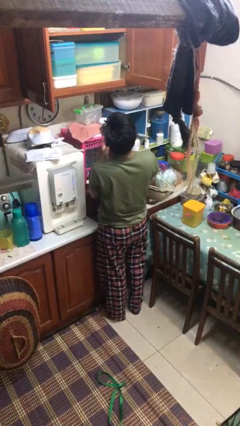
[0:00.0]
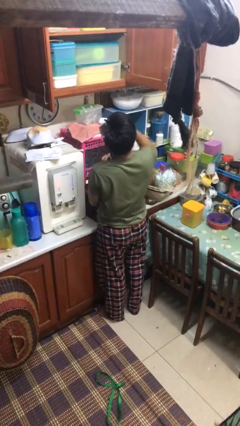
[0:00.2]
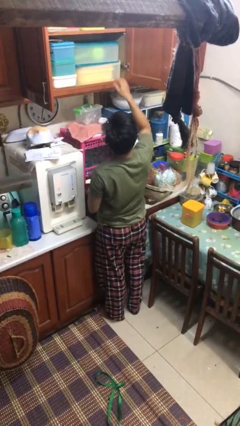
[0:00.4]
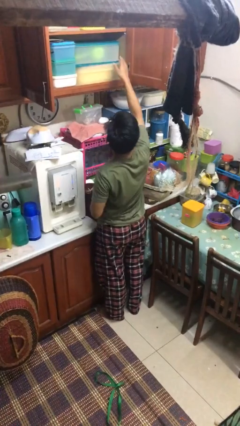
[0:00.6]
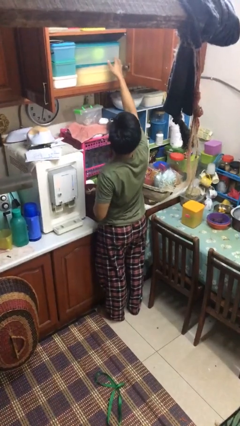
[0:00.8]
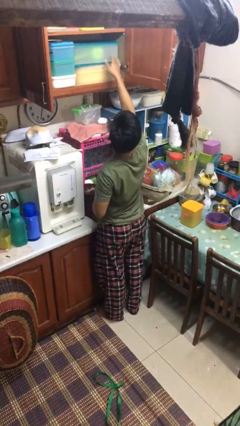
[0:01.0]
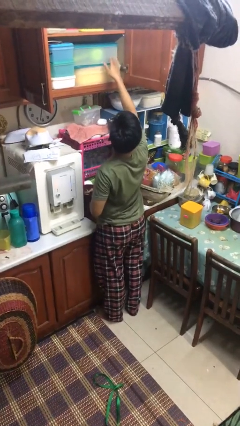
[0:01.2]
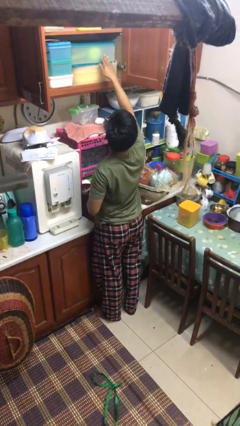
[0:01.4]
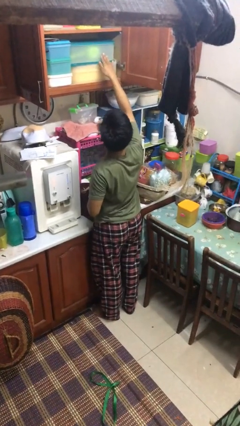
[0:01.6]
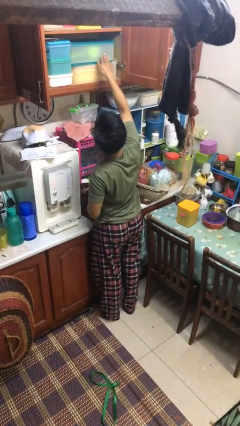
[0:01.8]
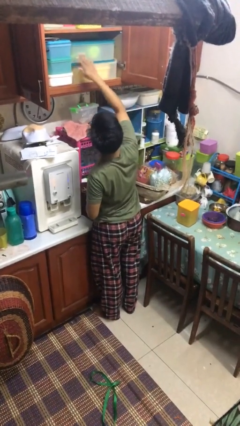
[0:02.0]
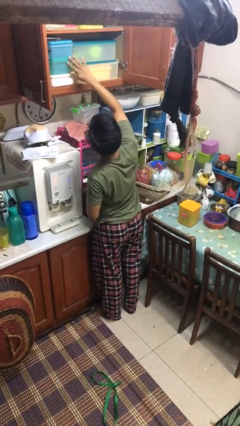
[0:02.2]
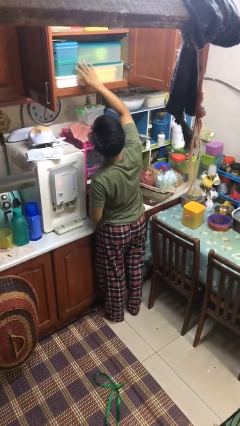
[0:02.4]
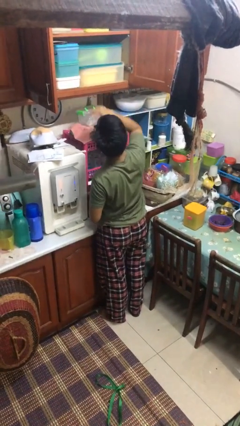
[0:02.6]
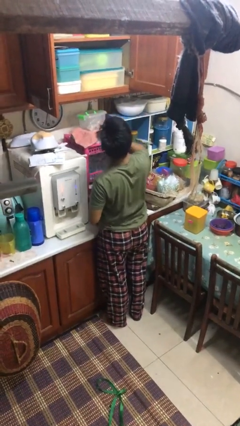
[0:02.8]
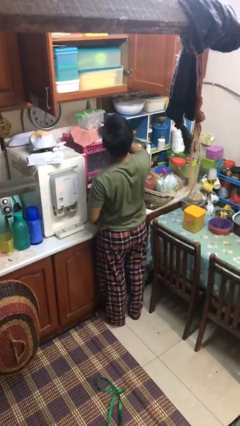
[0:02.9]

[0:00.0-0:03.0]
person searches in kitchen drawer

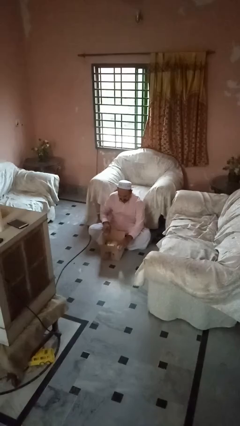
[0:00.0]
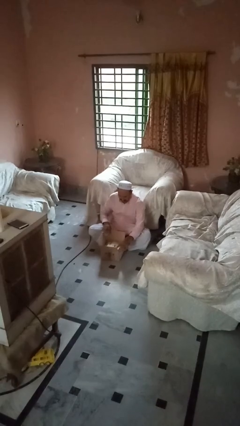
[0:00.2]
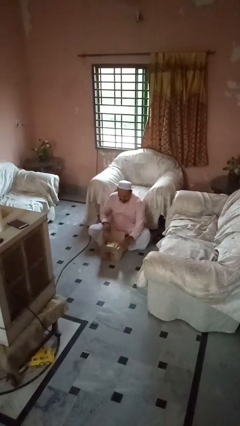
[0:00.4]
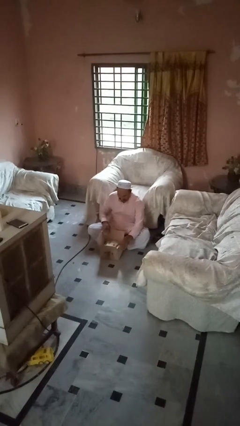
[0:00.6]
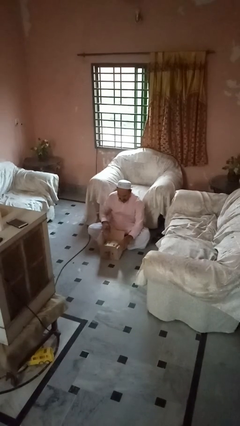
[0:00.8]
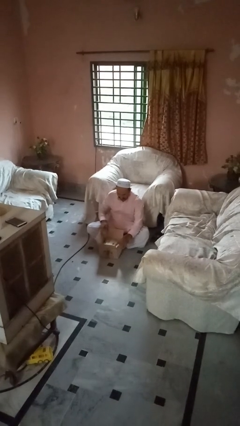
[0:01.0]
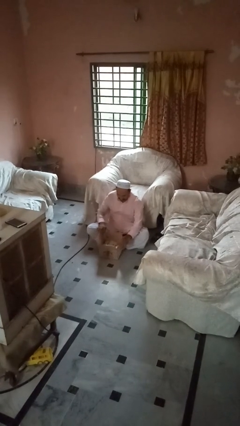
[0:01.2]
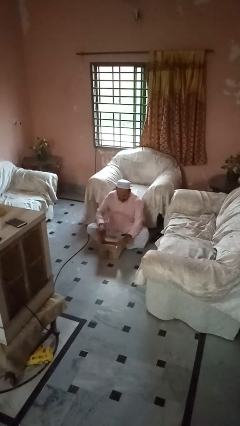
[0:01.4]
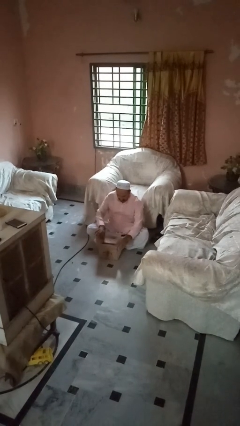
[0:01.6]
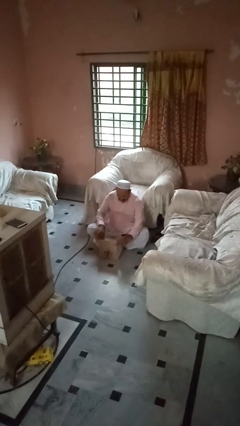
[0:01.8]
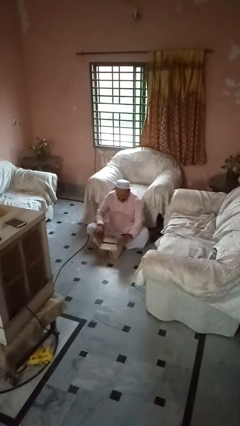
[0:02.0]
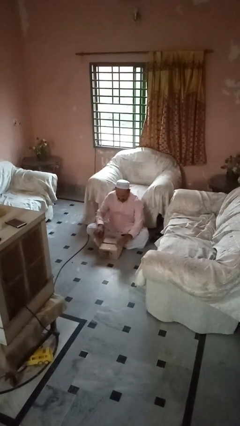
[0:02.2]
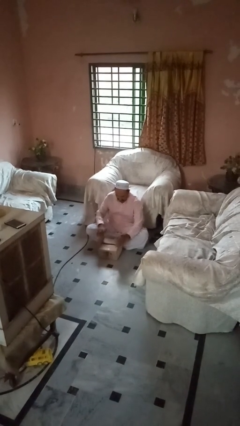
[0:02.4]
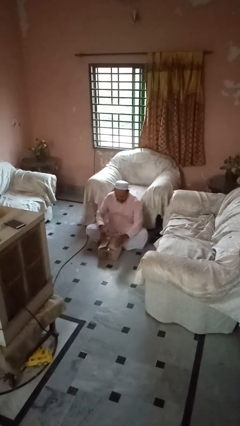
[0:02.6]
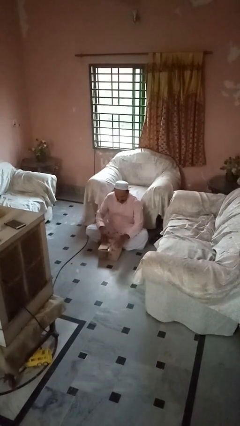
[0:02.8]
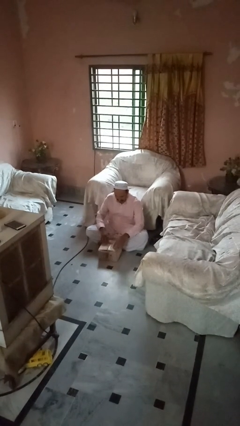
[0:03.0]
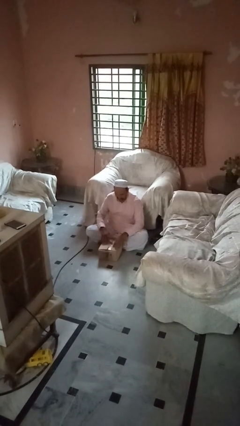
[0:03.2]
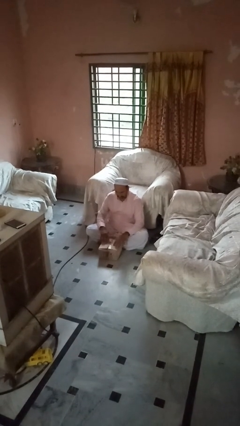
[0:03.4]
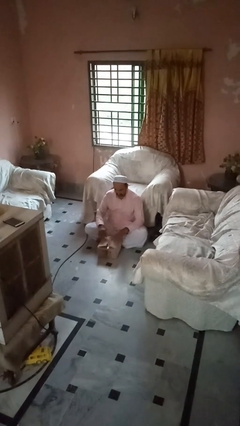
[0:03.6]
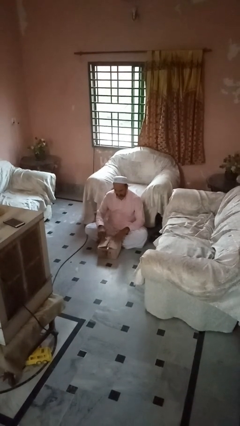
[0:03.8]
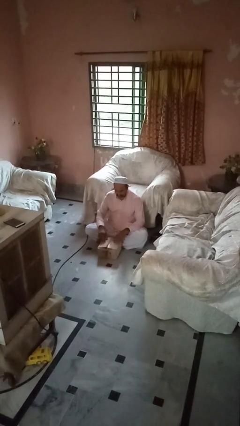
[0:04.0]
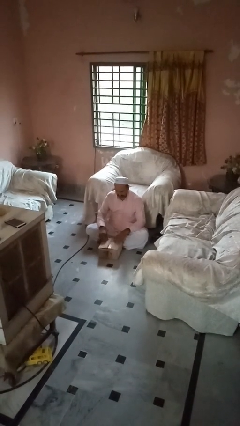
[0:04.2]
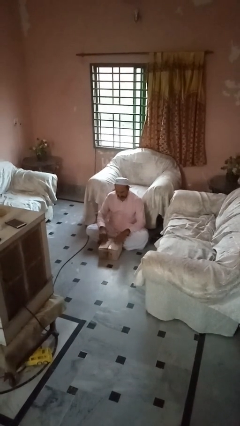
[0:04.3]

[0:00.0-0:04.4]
person closes box

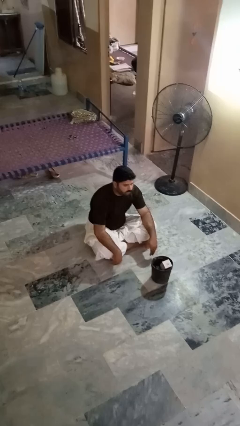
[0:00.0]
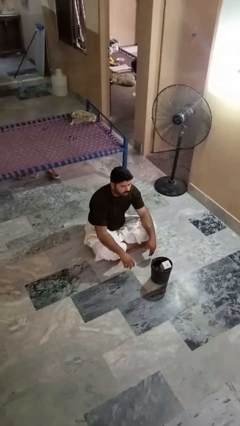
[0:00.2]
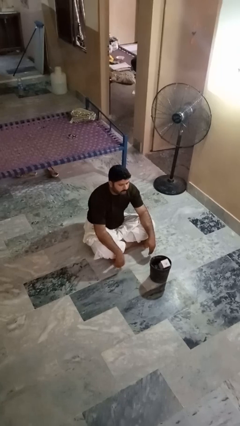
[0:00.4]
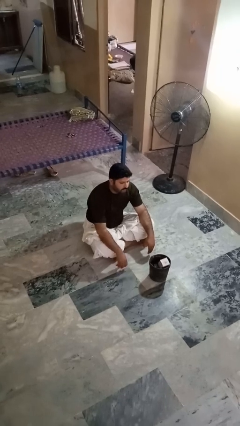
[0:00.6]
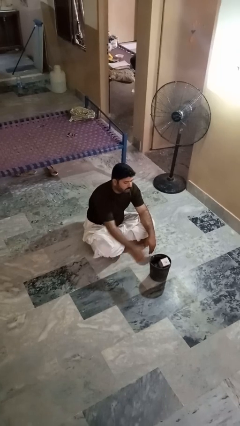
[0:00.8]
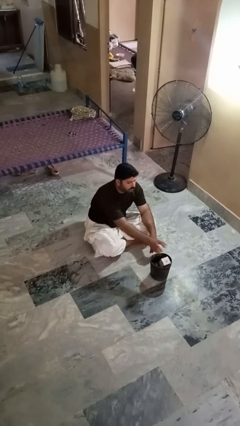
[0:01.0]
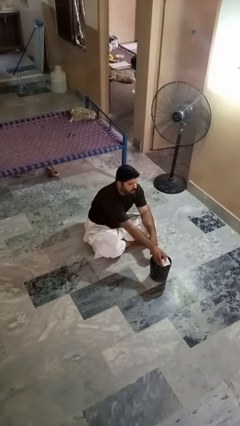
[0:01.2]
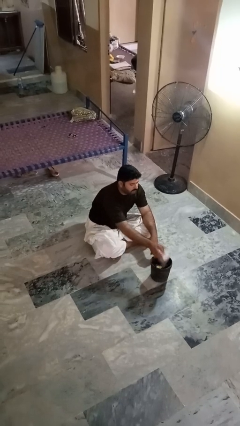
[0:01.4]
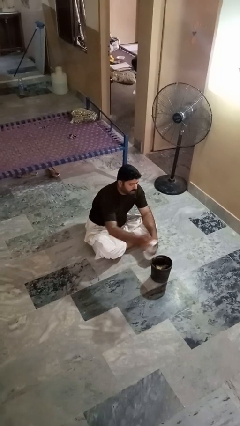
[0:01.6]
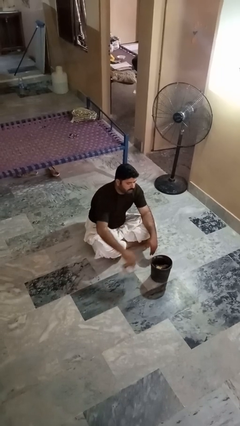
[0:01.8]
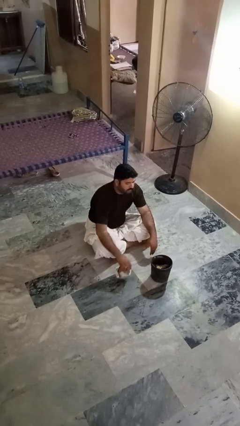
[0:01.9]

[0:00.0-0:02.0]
person takes object from basket

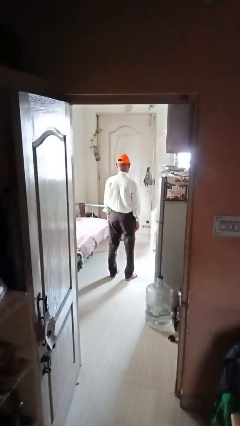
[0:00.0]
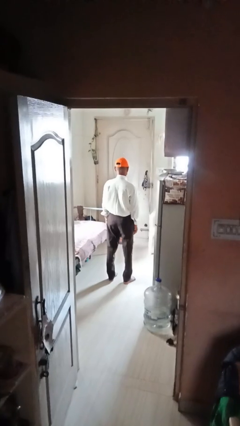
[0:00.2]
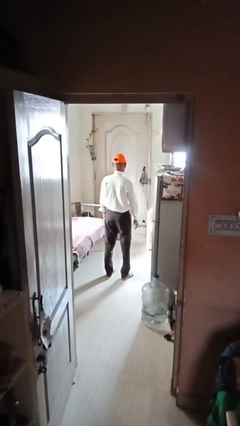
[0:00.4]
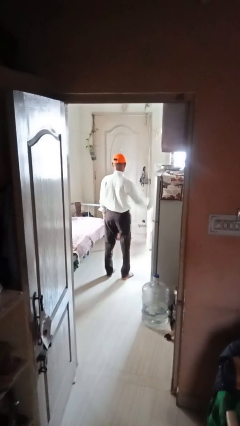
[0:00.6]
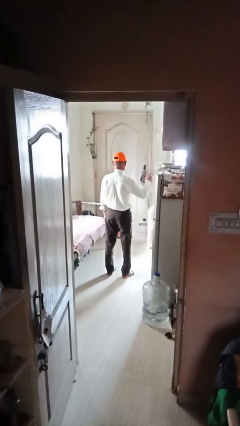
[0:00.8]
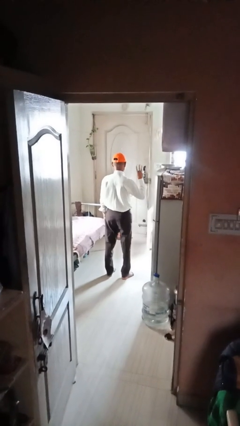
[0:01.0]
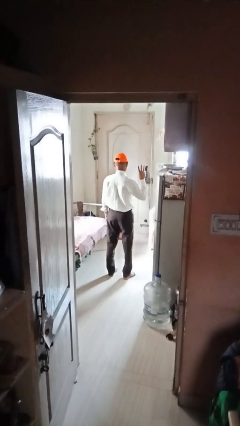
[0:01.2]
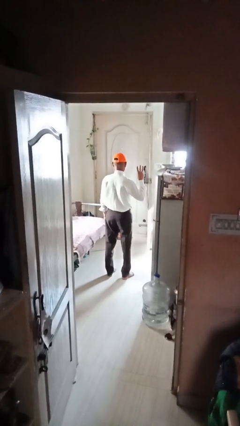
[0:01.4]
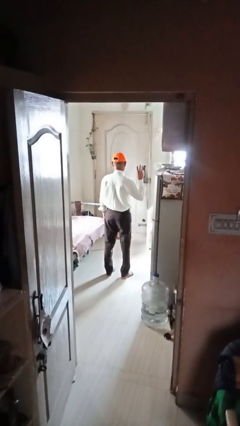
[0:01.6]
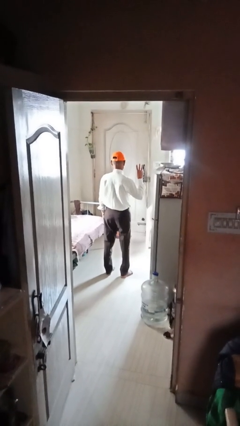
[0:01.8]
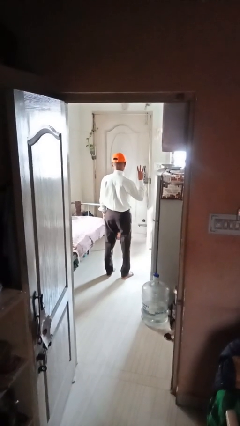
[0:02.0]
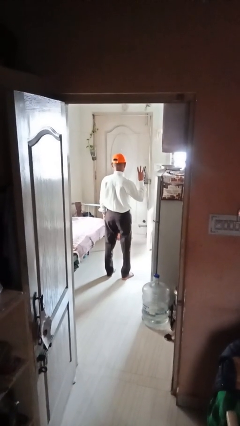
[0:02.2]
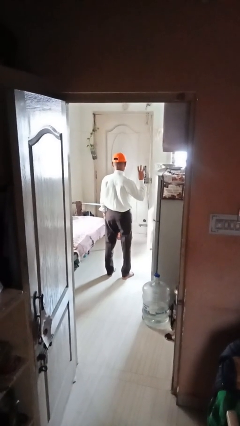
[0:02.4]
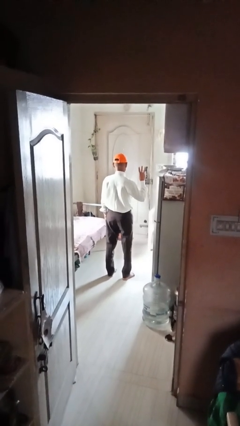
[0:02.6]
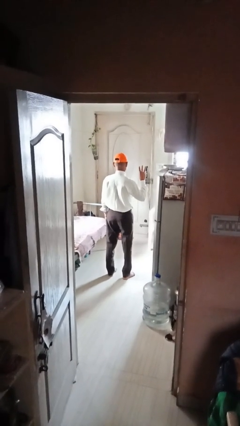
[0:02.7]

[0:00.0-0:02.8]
person gestures number three

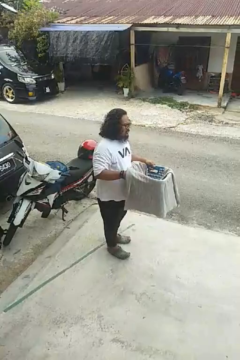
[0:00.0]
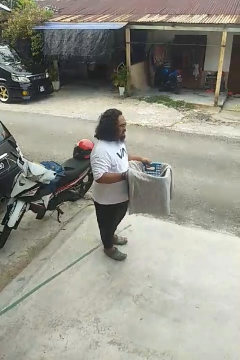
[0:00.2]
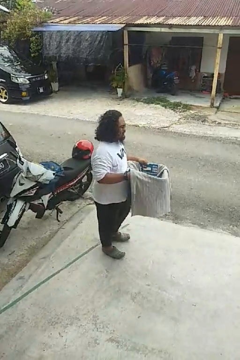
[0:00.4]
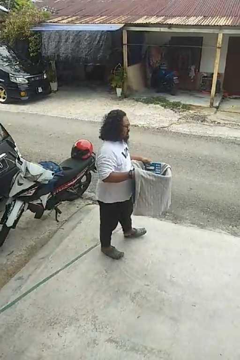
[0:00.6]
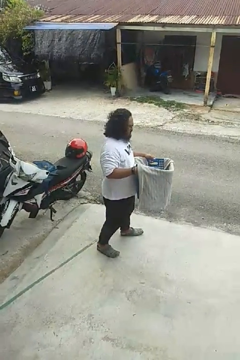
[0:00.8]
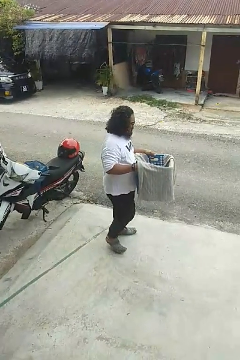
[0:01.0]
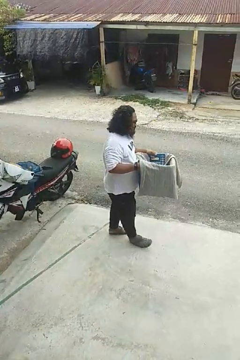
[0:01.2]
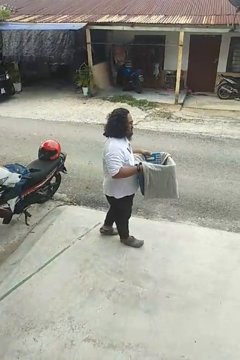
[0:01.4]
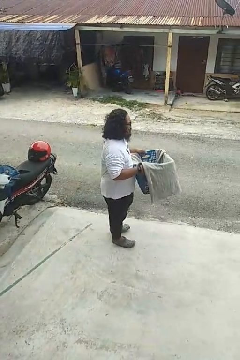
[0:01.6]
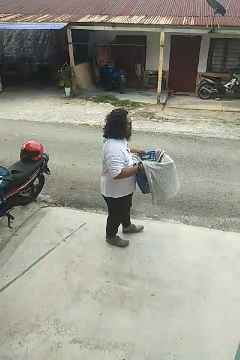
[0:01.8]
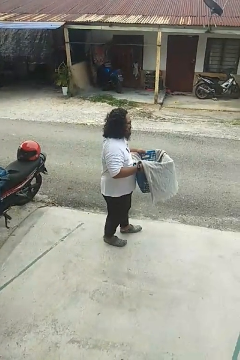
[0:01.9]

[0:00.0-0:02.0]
person carries laundry basket

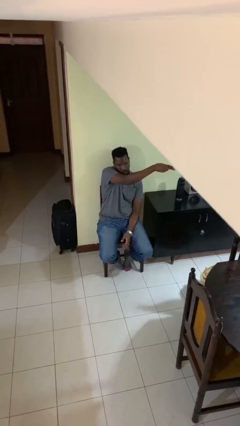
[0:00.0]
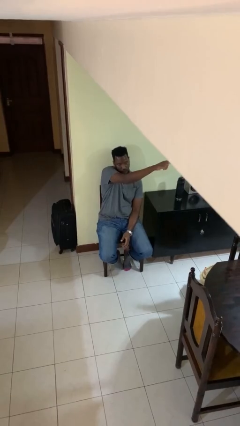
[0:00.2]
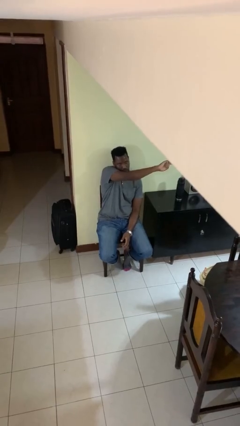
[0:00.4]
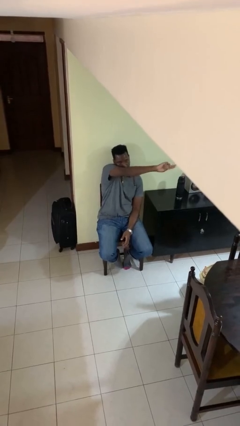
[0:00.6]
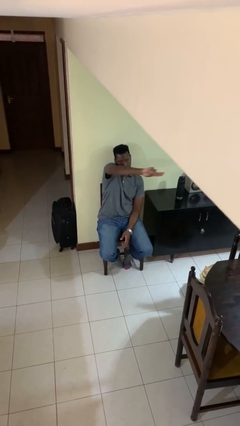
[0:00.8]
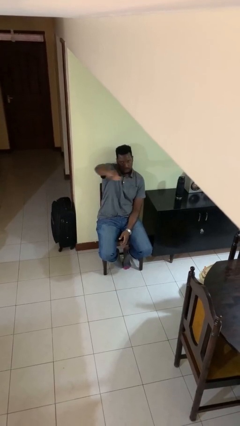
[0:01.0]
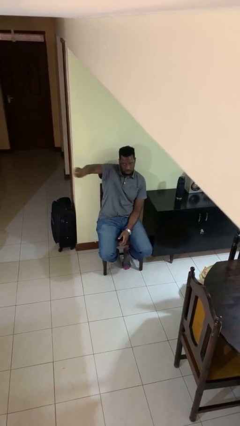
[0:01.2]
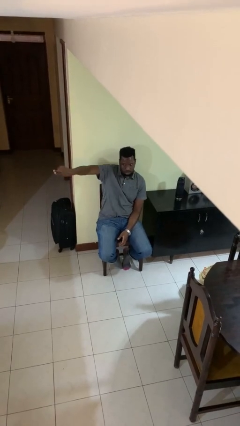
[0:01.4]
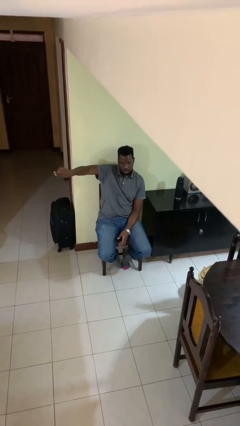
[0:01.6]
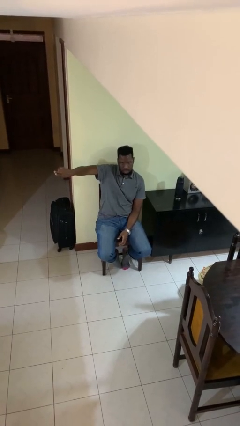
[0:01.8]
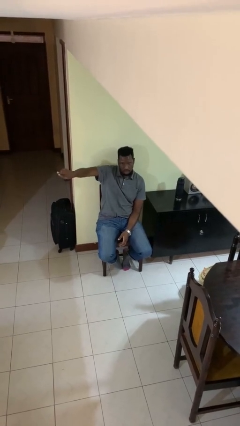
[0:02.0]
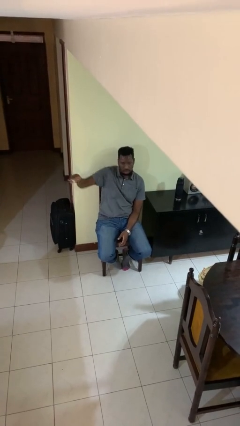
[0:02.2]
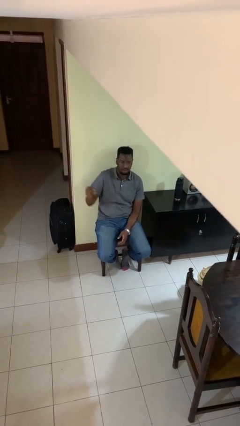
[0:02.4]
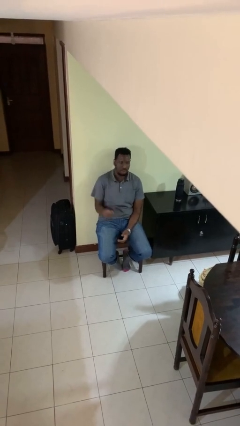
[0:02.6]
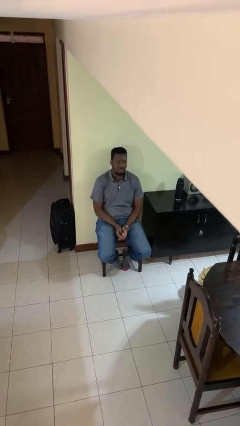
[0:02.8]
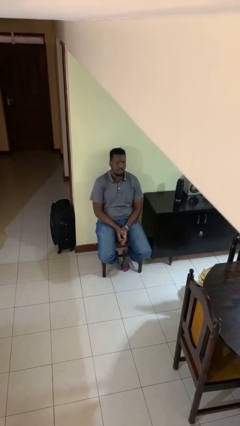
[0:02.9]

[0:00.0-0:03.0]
person gestures swipe right
